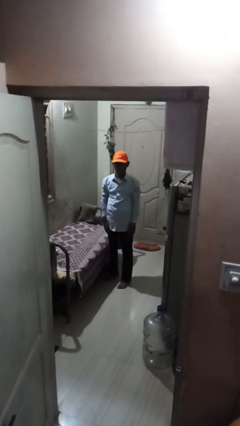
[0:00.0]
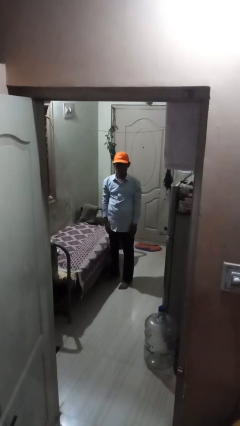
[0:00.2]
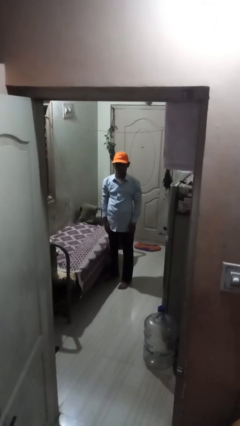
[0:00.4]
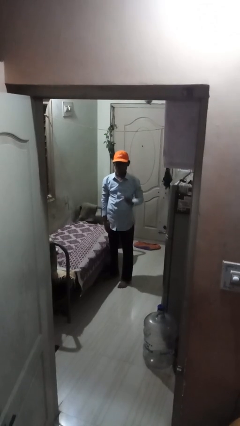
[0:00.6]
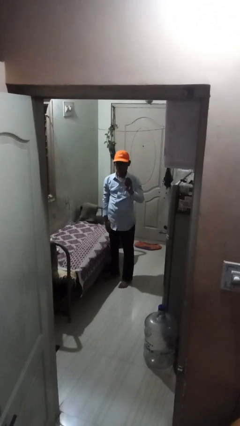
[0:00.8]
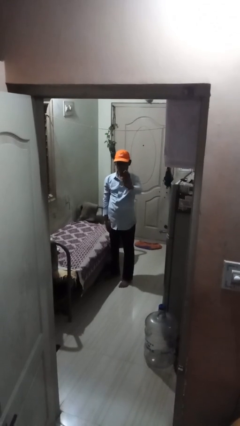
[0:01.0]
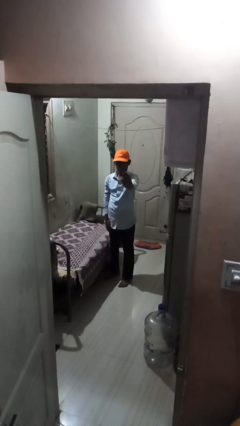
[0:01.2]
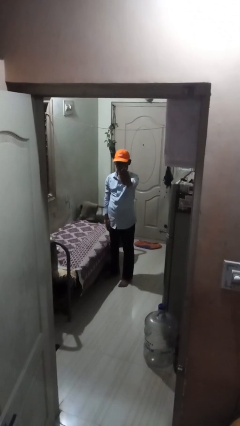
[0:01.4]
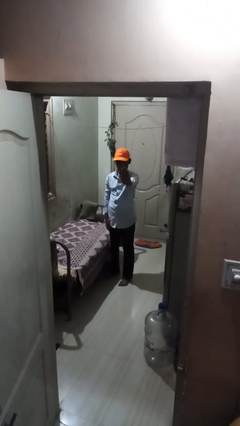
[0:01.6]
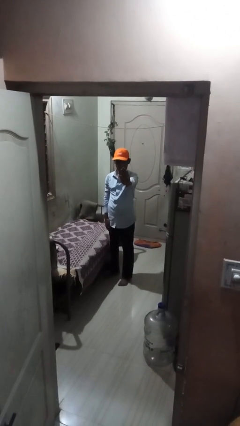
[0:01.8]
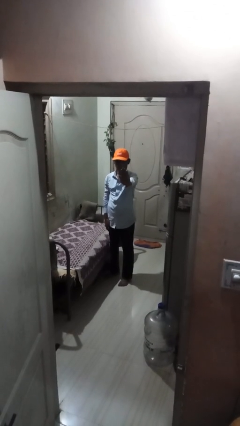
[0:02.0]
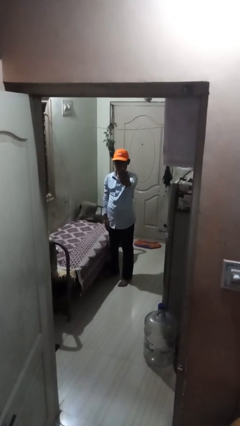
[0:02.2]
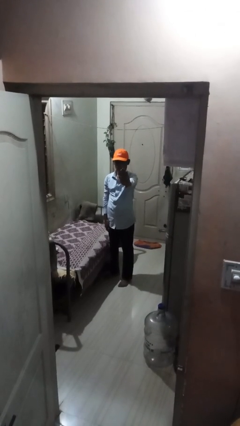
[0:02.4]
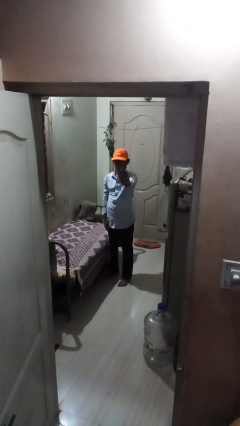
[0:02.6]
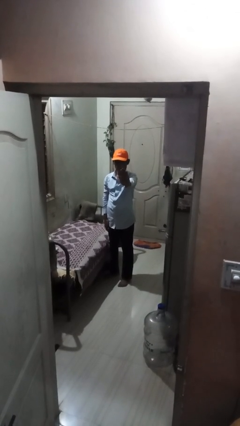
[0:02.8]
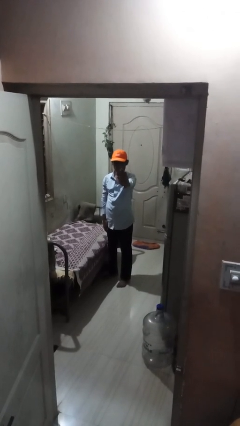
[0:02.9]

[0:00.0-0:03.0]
person gestures stop

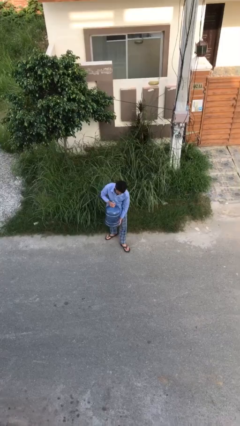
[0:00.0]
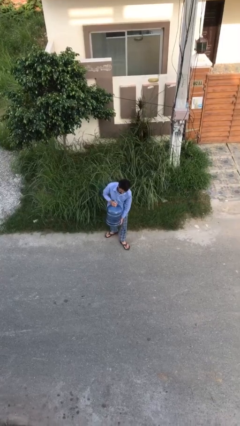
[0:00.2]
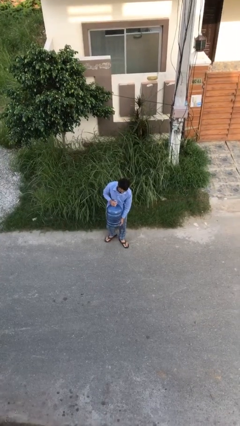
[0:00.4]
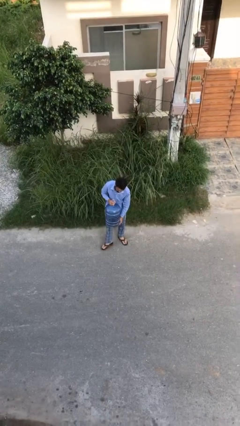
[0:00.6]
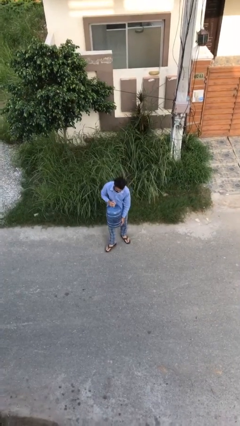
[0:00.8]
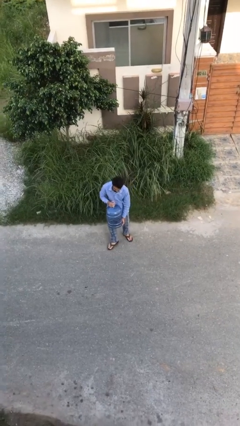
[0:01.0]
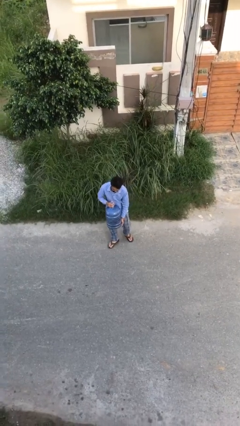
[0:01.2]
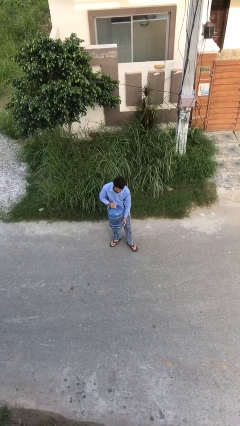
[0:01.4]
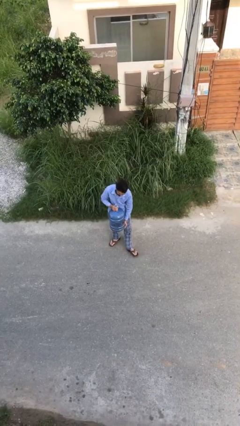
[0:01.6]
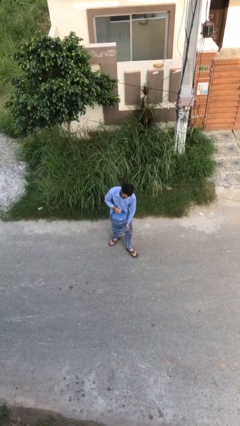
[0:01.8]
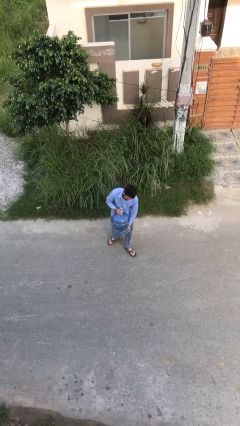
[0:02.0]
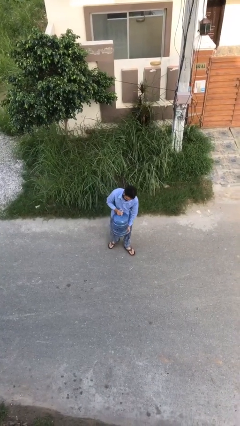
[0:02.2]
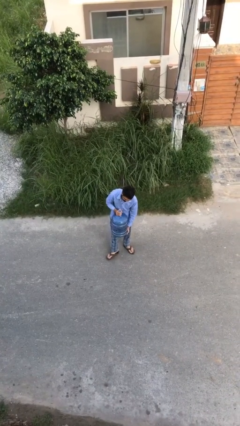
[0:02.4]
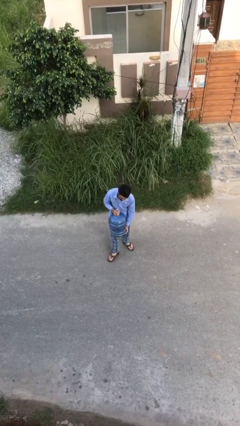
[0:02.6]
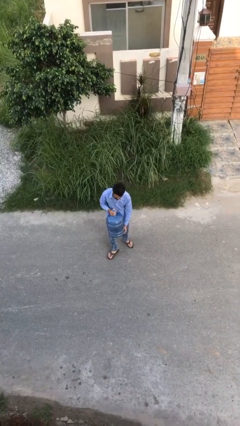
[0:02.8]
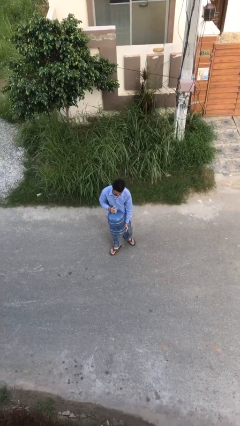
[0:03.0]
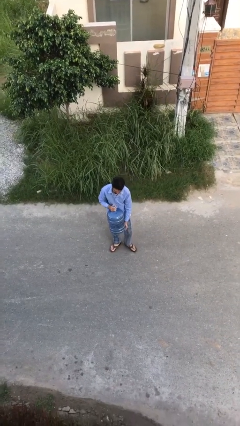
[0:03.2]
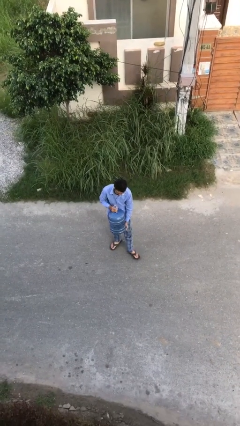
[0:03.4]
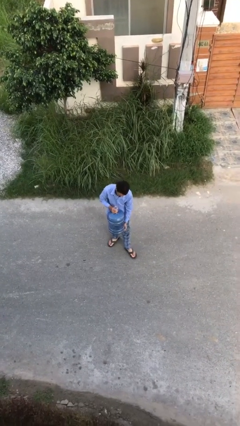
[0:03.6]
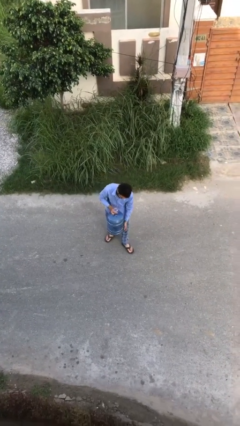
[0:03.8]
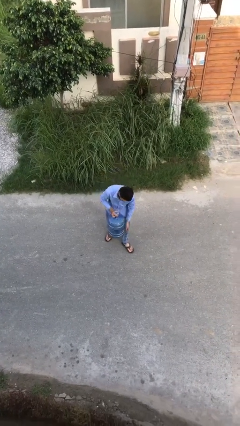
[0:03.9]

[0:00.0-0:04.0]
person carries heavy object

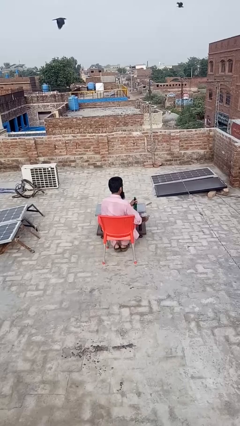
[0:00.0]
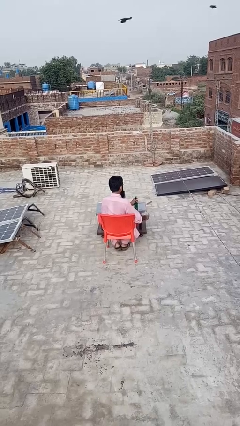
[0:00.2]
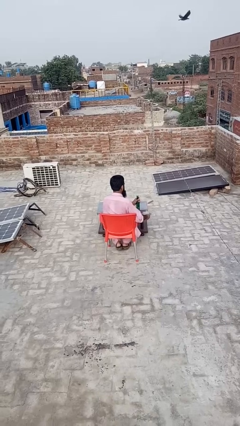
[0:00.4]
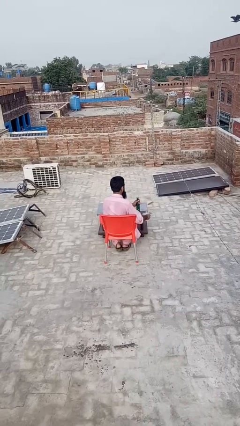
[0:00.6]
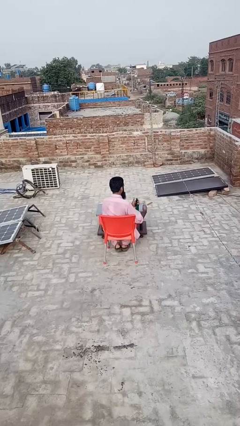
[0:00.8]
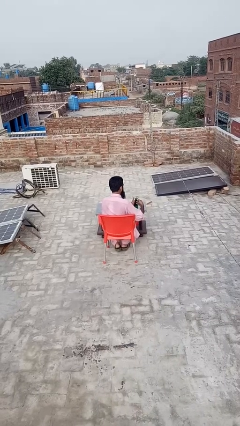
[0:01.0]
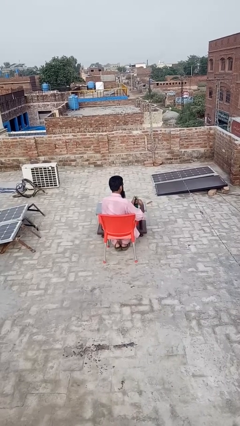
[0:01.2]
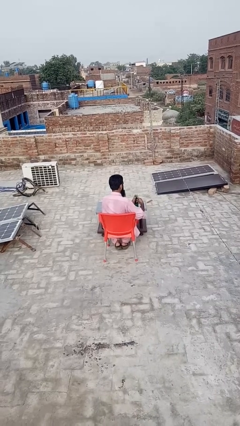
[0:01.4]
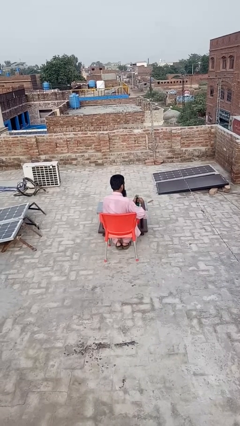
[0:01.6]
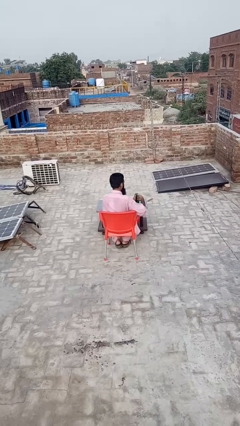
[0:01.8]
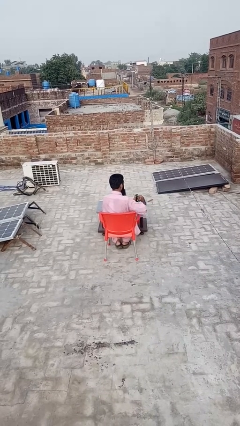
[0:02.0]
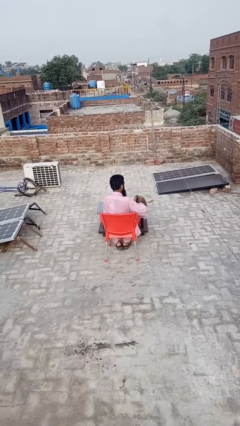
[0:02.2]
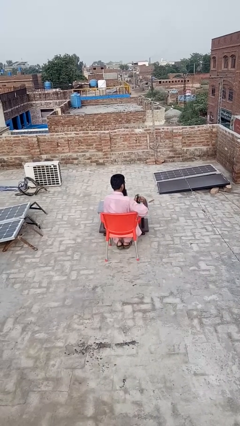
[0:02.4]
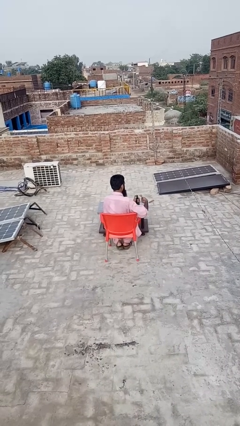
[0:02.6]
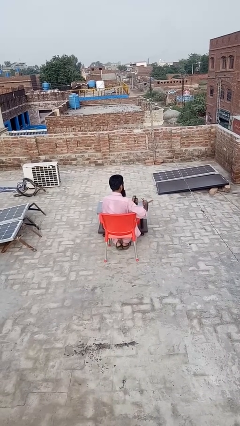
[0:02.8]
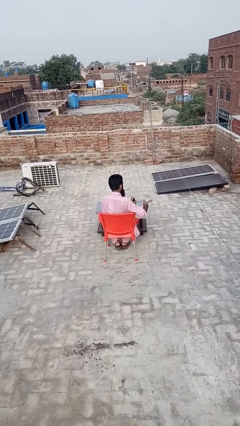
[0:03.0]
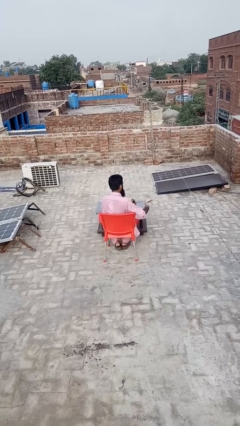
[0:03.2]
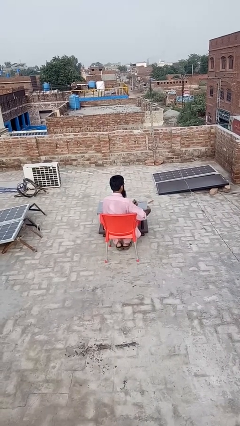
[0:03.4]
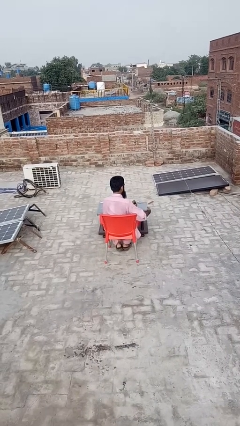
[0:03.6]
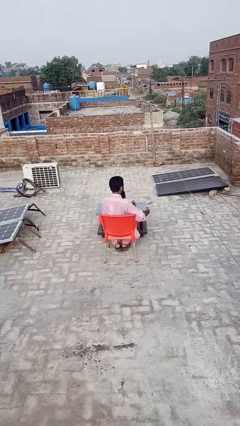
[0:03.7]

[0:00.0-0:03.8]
person opens can with can opener

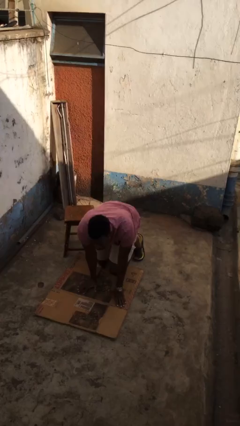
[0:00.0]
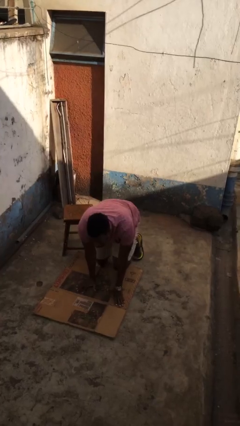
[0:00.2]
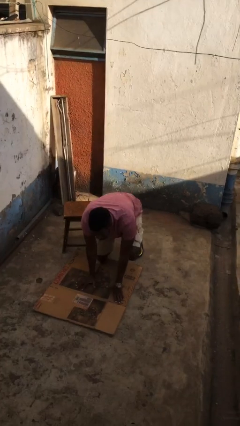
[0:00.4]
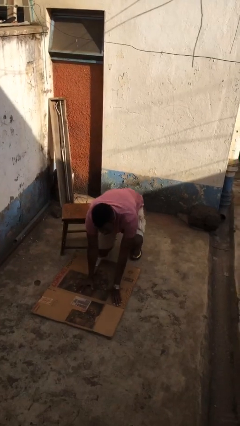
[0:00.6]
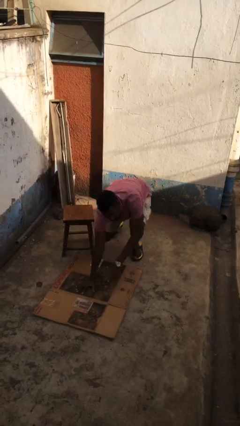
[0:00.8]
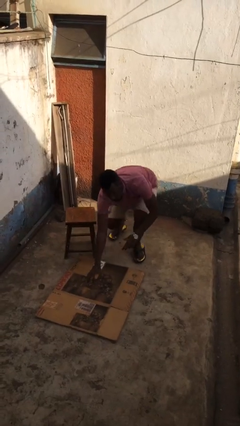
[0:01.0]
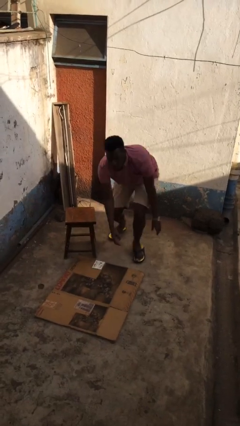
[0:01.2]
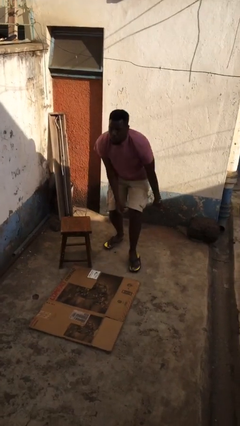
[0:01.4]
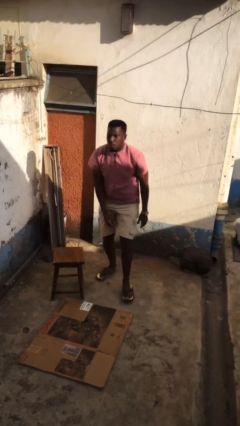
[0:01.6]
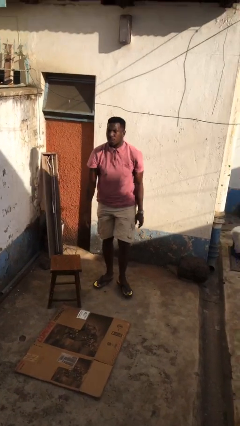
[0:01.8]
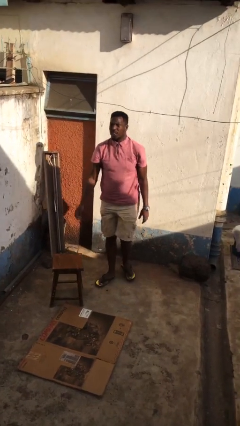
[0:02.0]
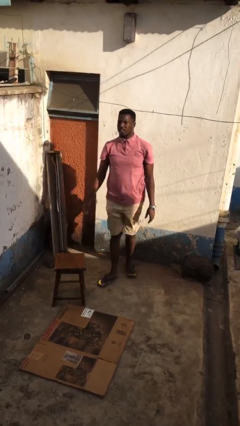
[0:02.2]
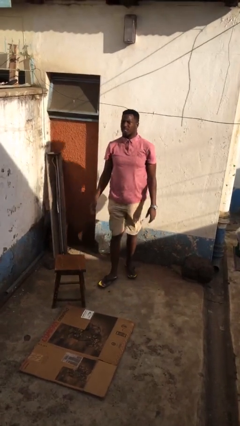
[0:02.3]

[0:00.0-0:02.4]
person stands up from floor

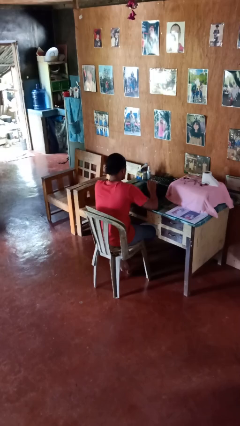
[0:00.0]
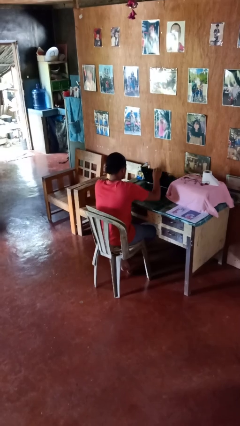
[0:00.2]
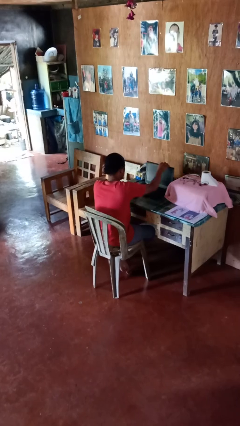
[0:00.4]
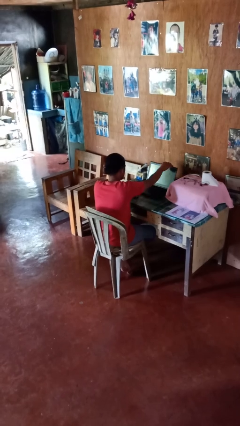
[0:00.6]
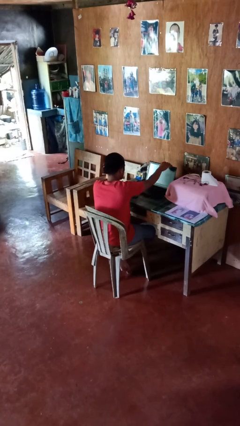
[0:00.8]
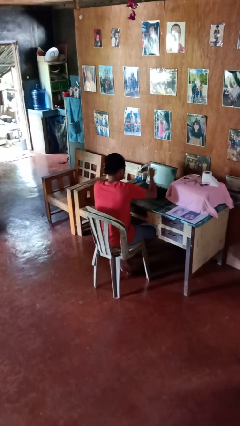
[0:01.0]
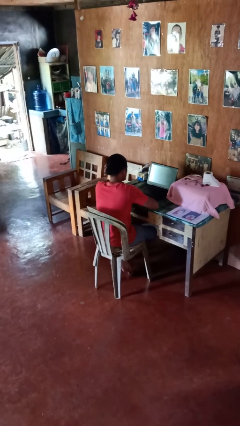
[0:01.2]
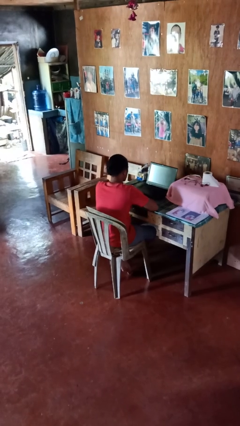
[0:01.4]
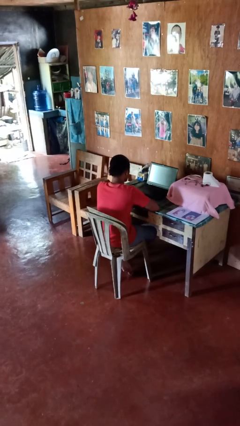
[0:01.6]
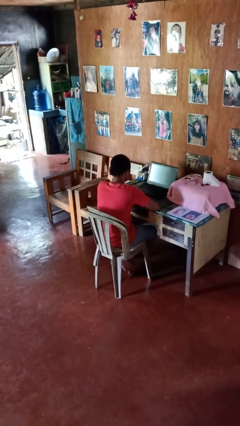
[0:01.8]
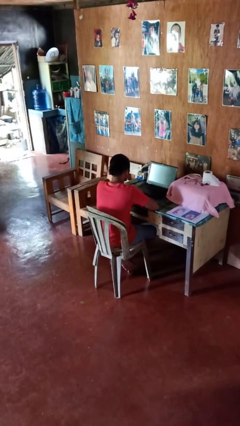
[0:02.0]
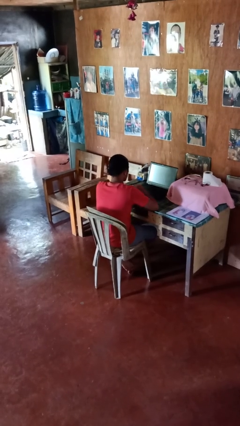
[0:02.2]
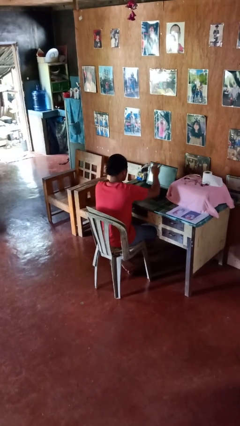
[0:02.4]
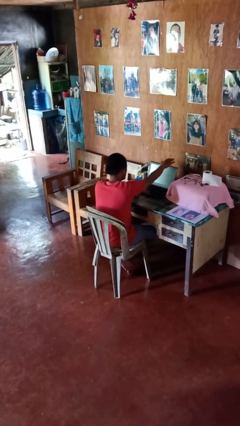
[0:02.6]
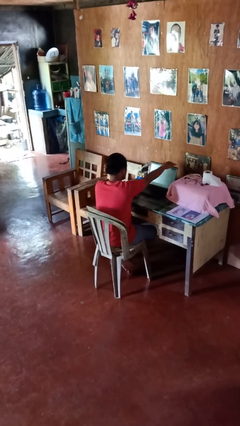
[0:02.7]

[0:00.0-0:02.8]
person opens laptop

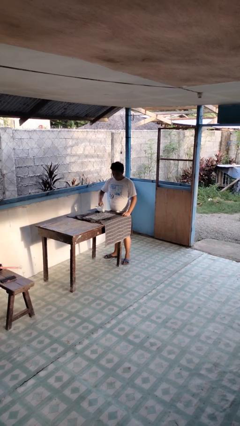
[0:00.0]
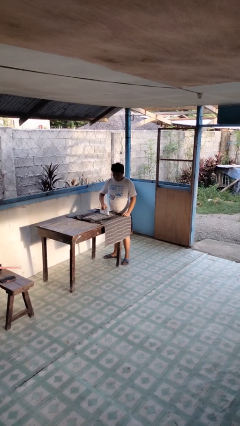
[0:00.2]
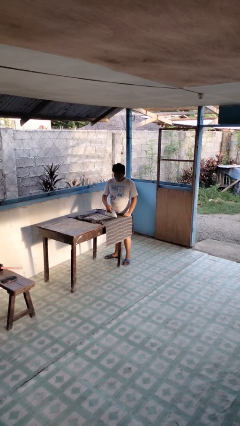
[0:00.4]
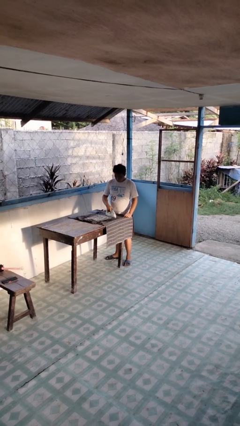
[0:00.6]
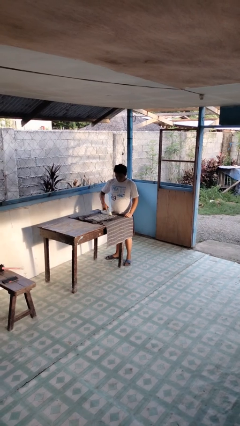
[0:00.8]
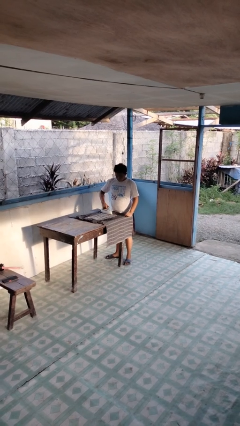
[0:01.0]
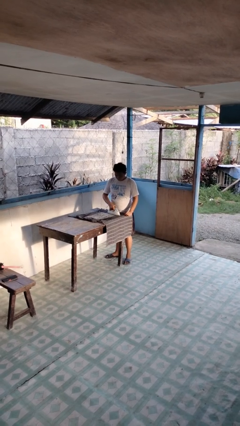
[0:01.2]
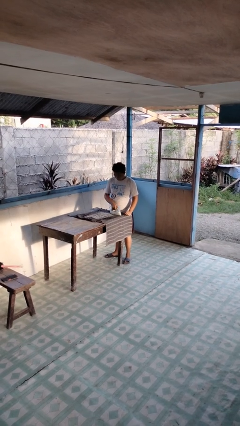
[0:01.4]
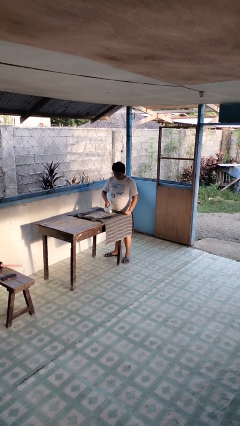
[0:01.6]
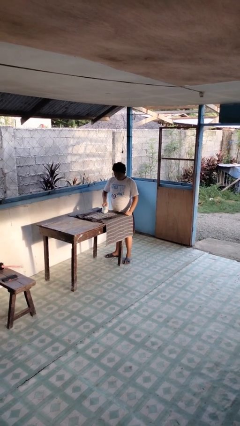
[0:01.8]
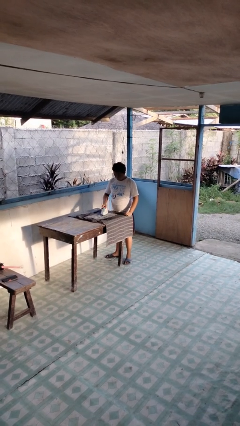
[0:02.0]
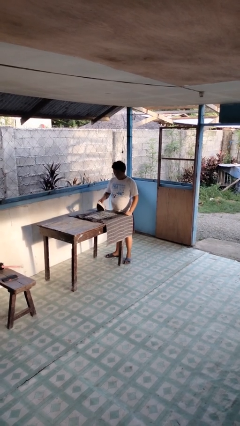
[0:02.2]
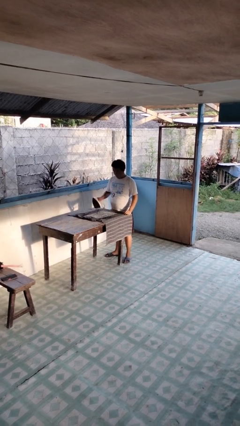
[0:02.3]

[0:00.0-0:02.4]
person irons clothes
